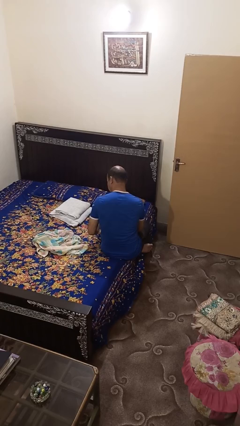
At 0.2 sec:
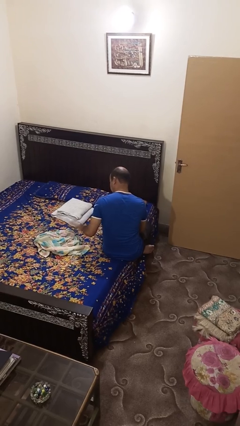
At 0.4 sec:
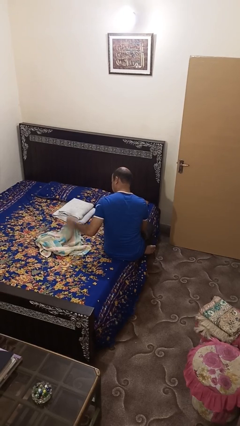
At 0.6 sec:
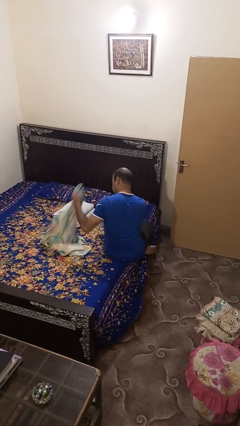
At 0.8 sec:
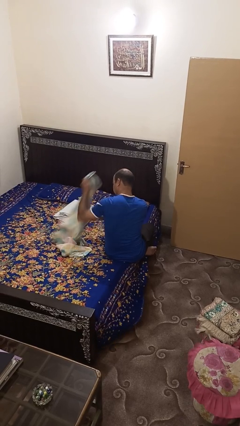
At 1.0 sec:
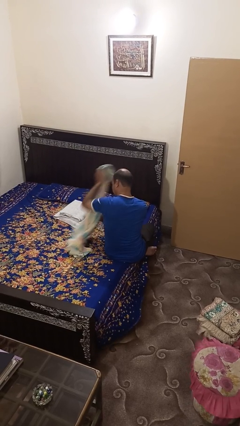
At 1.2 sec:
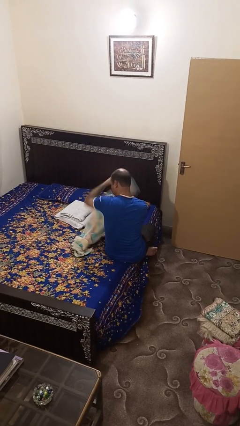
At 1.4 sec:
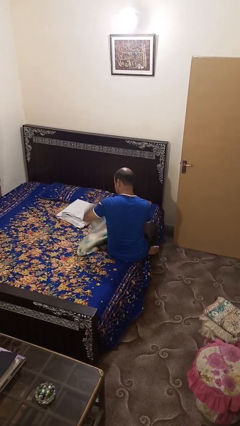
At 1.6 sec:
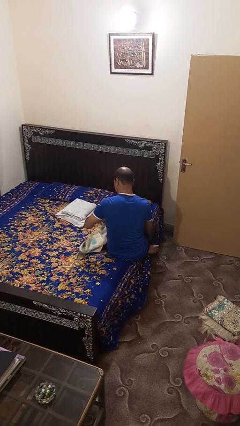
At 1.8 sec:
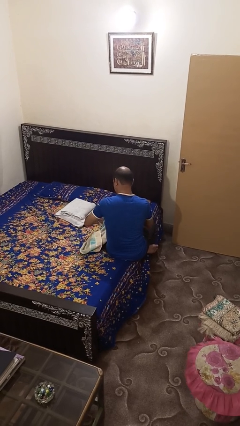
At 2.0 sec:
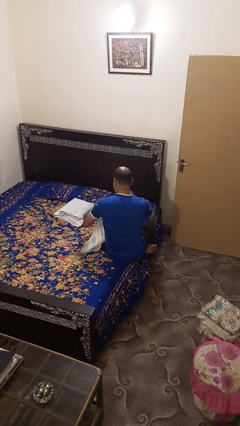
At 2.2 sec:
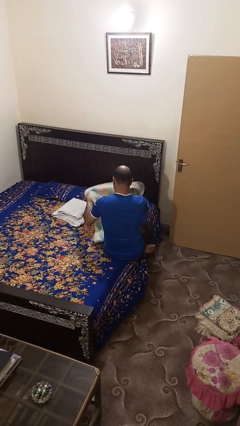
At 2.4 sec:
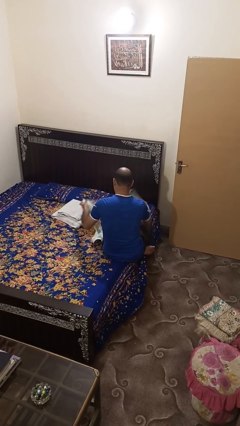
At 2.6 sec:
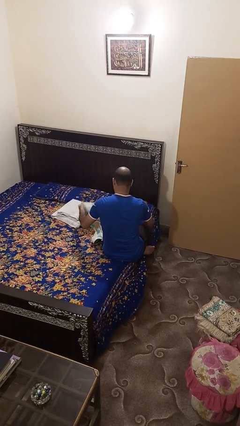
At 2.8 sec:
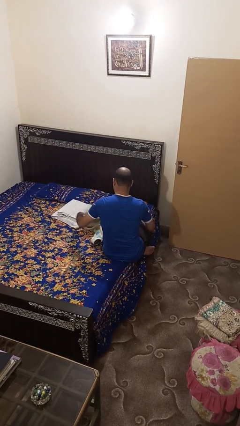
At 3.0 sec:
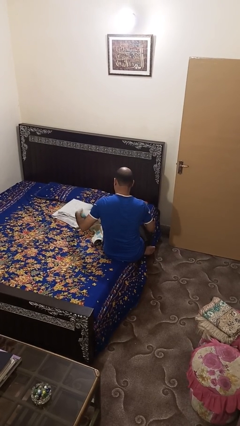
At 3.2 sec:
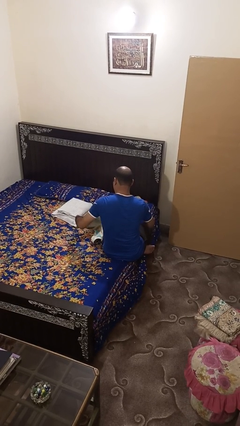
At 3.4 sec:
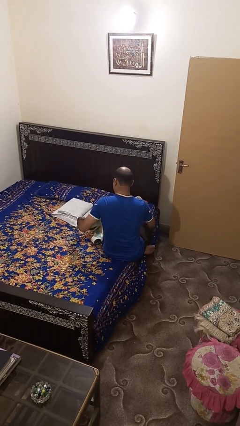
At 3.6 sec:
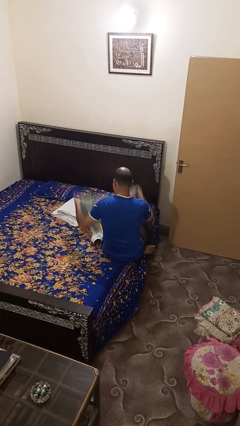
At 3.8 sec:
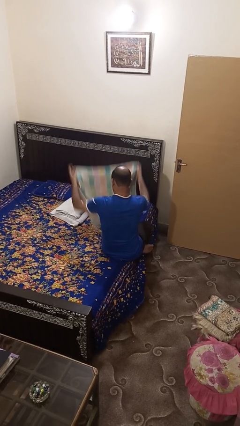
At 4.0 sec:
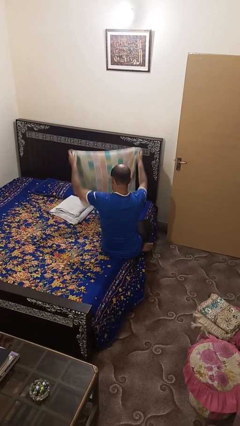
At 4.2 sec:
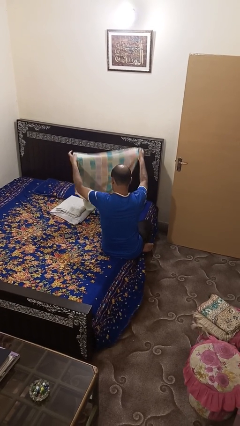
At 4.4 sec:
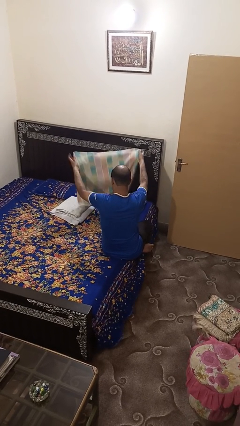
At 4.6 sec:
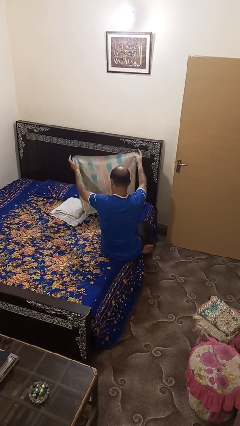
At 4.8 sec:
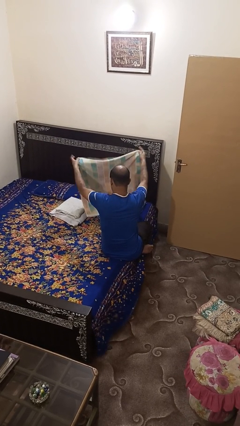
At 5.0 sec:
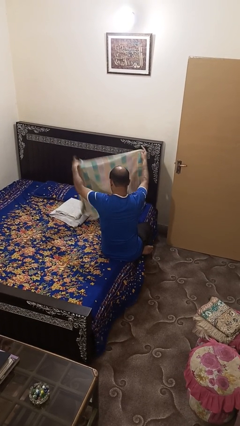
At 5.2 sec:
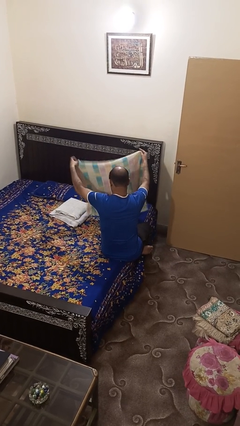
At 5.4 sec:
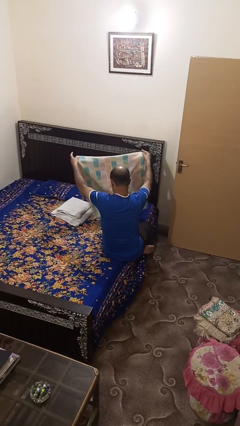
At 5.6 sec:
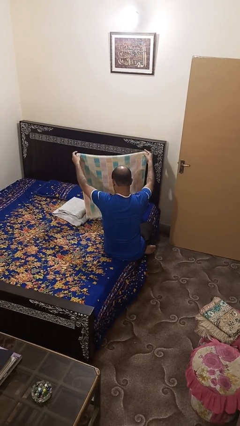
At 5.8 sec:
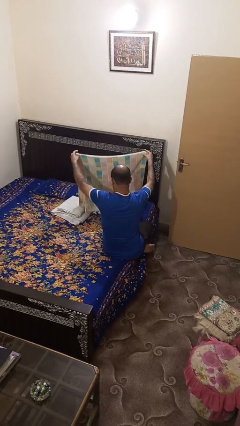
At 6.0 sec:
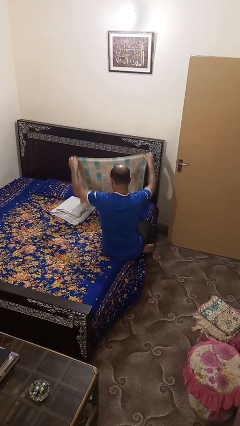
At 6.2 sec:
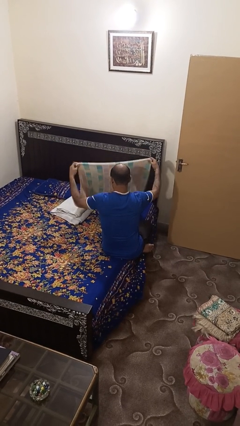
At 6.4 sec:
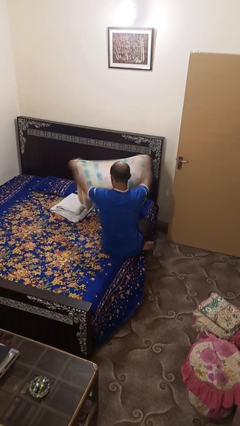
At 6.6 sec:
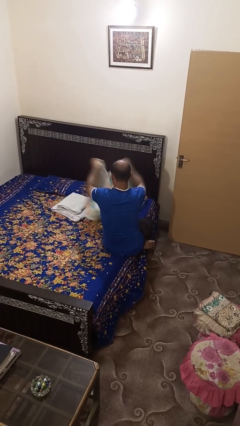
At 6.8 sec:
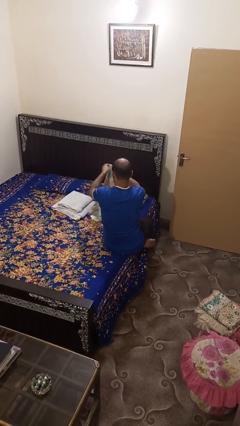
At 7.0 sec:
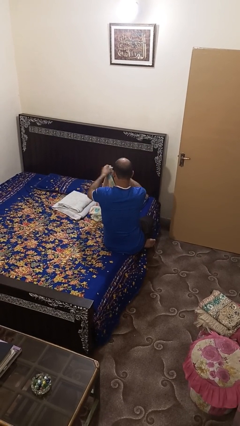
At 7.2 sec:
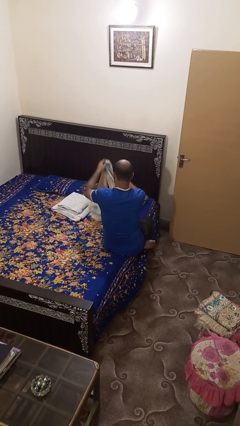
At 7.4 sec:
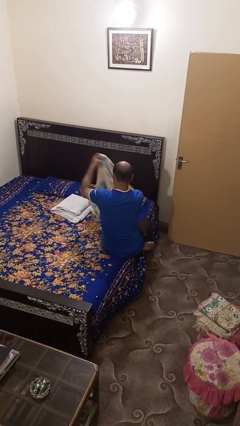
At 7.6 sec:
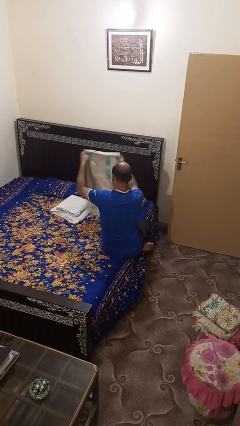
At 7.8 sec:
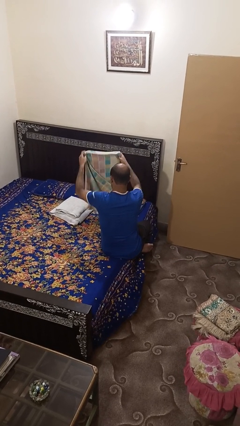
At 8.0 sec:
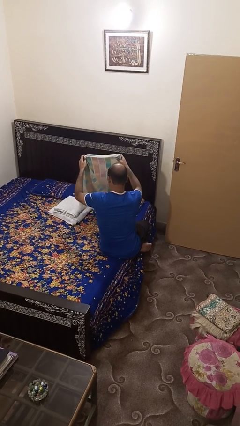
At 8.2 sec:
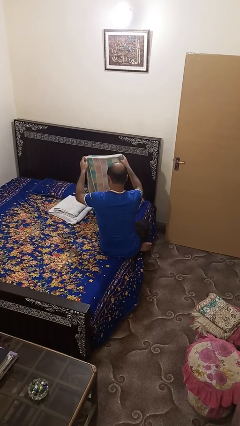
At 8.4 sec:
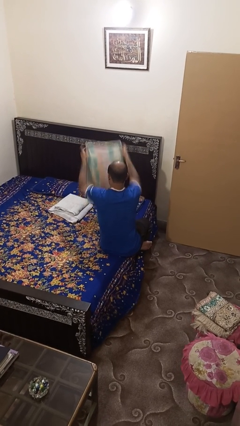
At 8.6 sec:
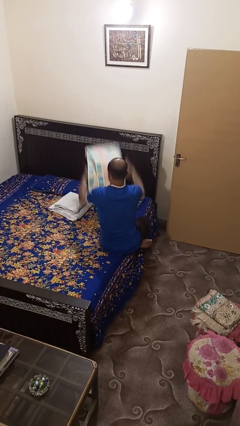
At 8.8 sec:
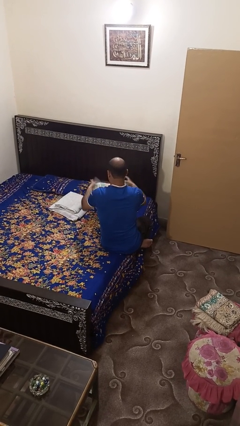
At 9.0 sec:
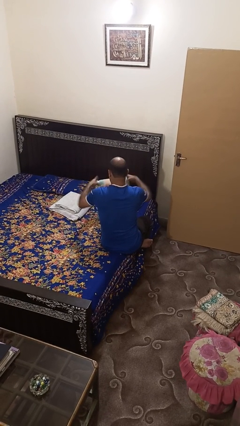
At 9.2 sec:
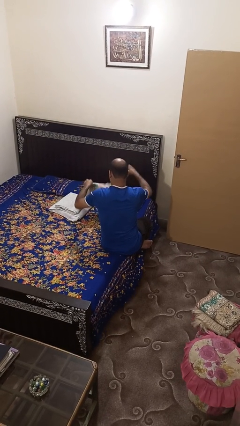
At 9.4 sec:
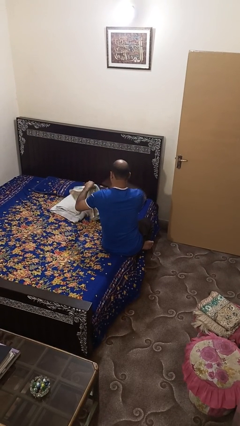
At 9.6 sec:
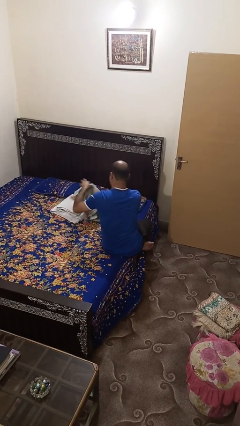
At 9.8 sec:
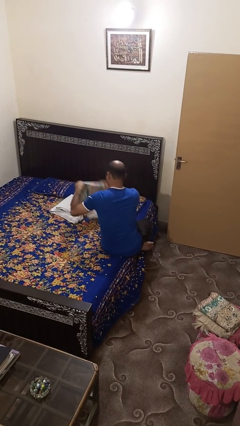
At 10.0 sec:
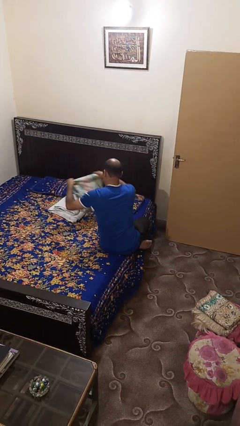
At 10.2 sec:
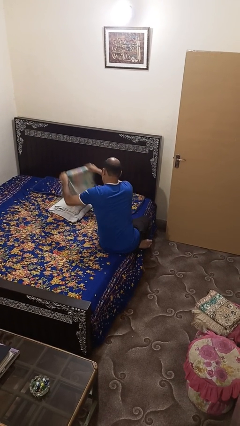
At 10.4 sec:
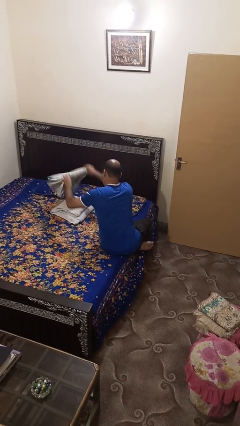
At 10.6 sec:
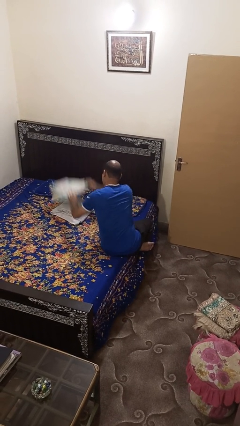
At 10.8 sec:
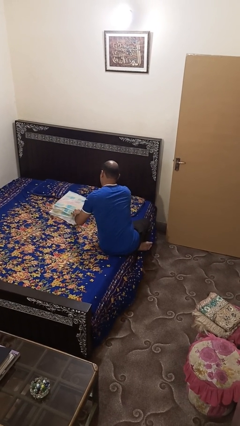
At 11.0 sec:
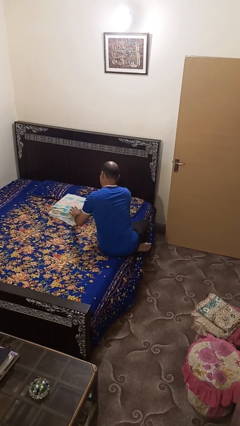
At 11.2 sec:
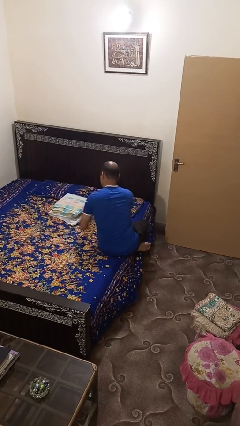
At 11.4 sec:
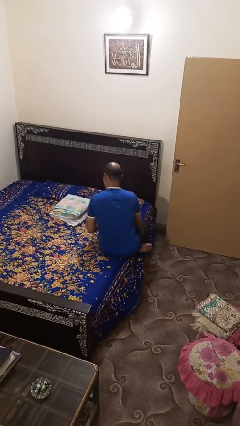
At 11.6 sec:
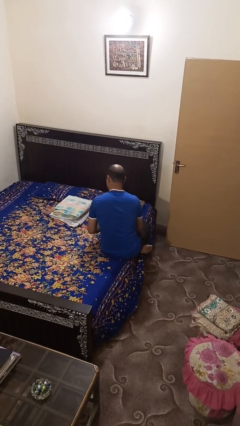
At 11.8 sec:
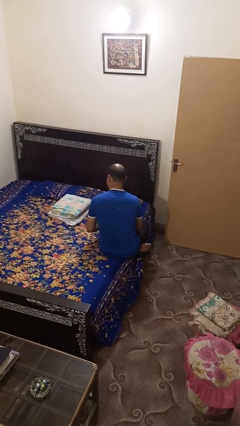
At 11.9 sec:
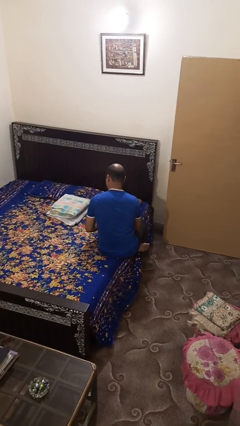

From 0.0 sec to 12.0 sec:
person folds towel

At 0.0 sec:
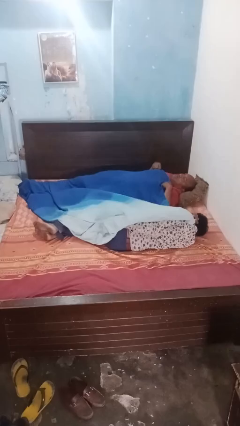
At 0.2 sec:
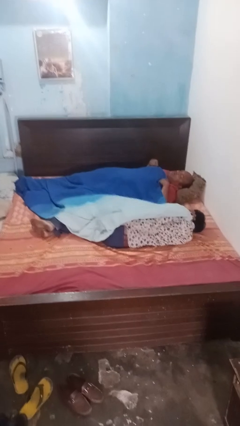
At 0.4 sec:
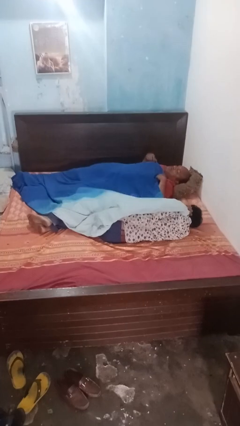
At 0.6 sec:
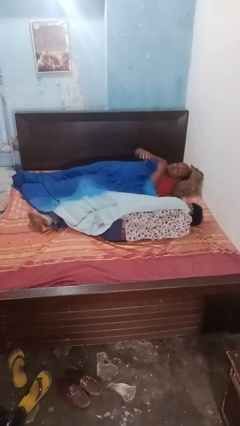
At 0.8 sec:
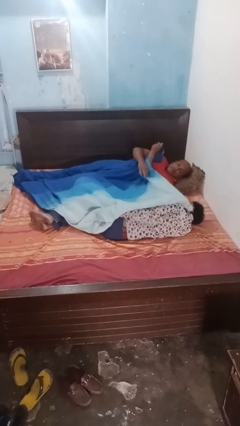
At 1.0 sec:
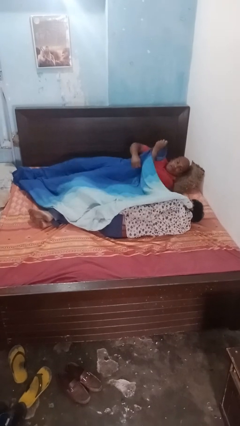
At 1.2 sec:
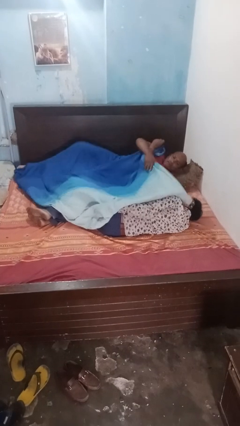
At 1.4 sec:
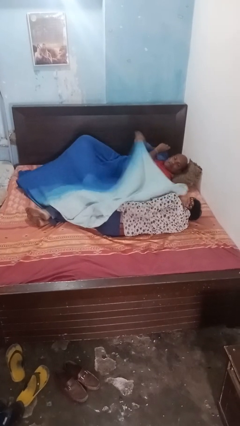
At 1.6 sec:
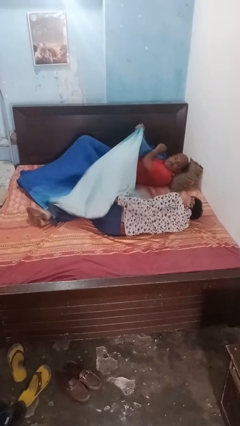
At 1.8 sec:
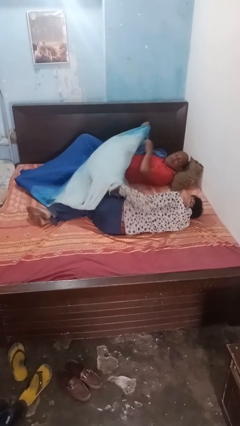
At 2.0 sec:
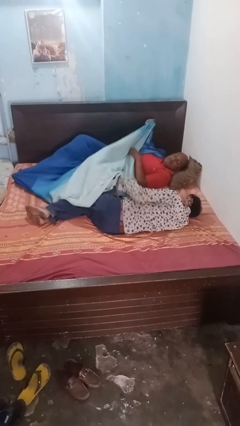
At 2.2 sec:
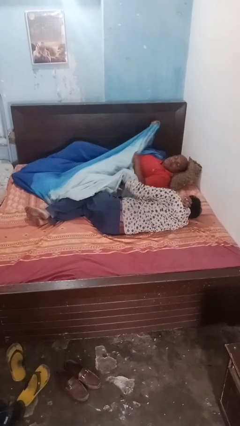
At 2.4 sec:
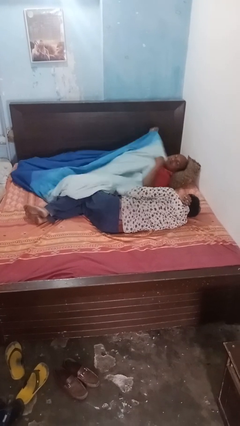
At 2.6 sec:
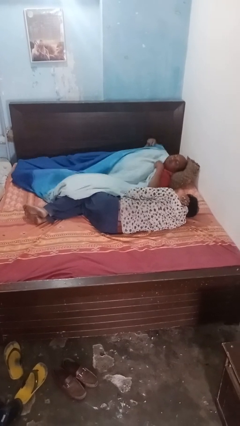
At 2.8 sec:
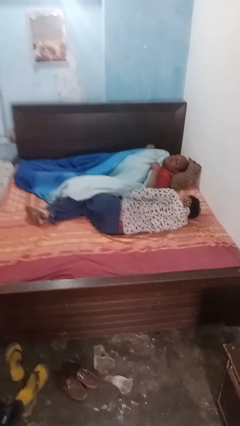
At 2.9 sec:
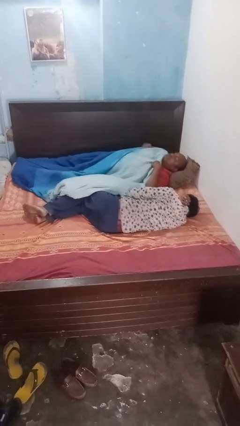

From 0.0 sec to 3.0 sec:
person uncovers friend with blanket

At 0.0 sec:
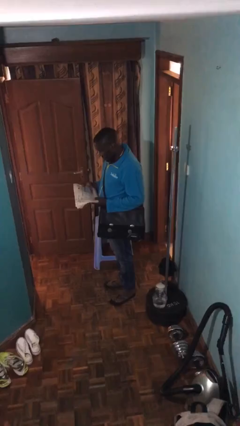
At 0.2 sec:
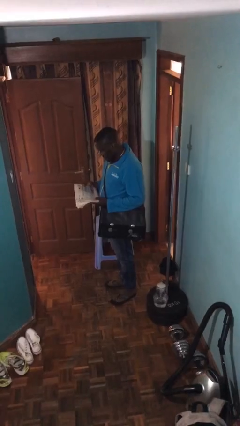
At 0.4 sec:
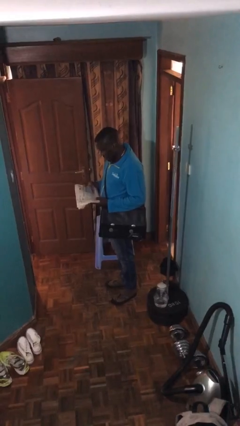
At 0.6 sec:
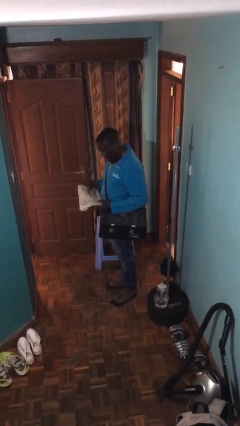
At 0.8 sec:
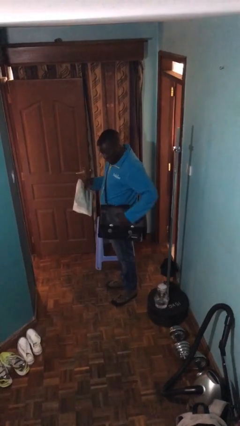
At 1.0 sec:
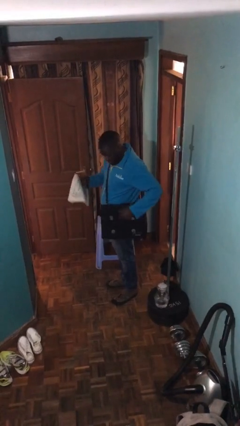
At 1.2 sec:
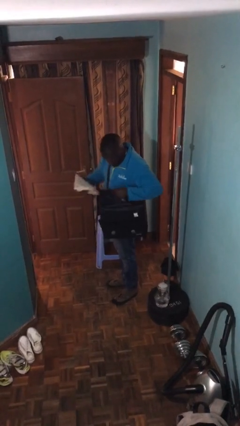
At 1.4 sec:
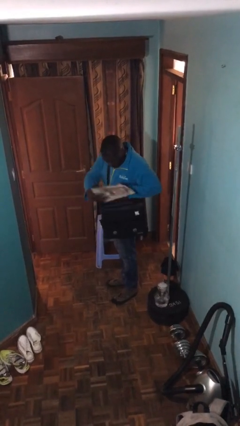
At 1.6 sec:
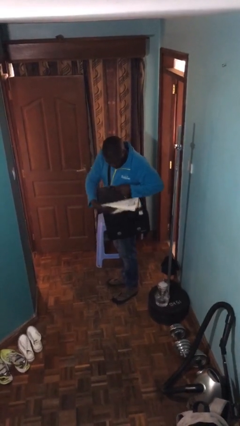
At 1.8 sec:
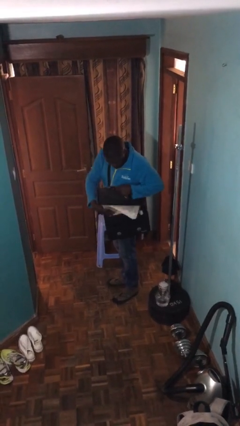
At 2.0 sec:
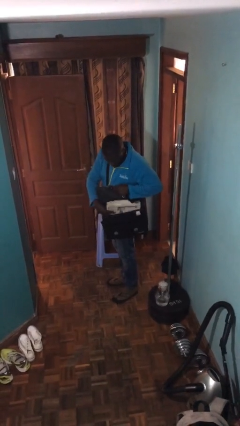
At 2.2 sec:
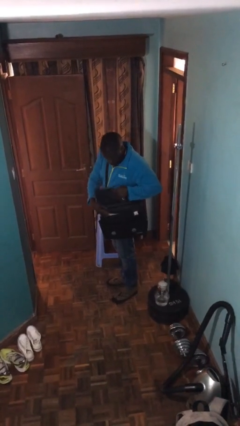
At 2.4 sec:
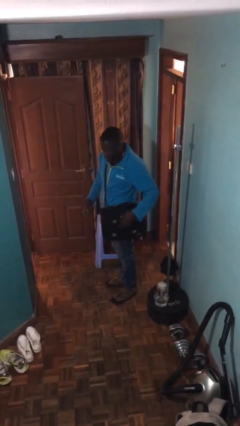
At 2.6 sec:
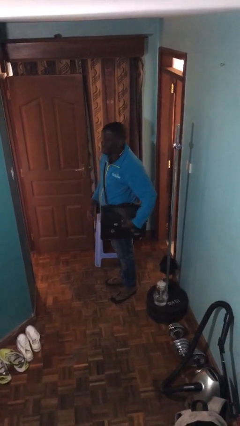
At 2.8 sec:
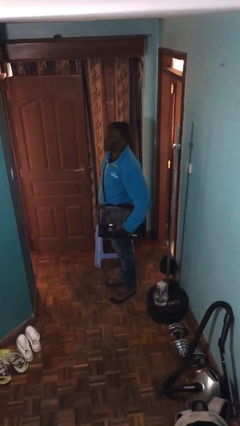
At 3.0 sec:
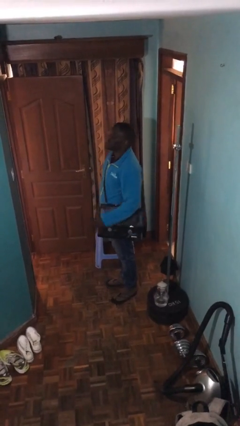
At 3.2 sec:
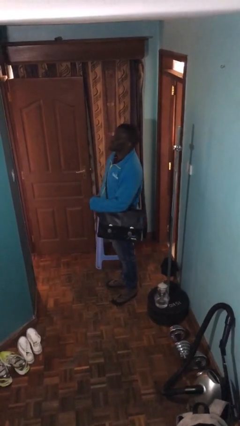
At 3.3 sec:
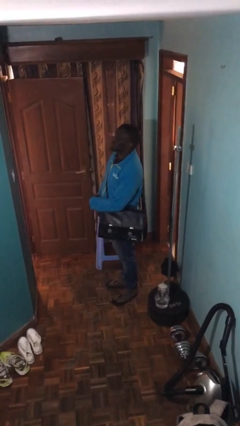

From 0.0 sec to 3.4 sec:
person puts object into purse
